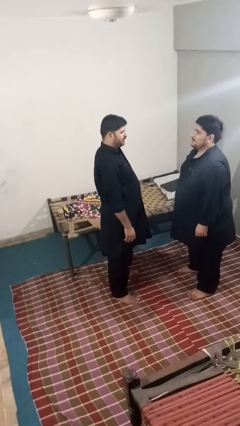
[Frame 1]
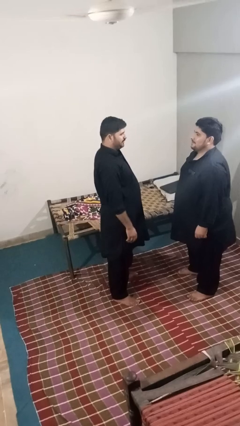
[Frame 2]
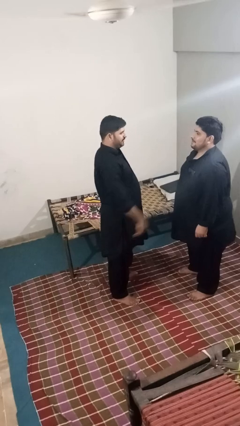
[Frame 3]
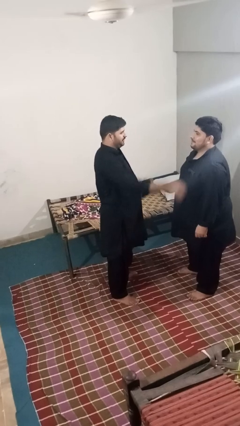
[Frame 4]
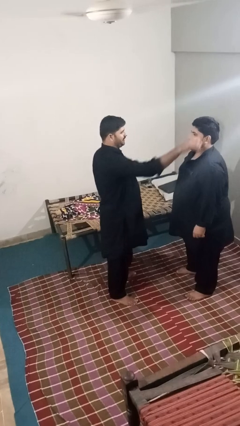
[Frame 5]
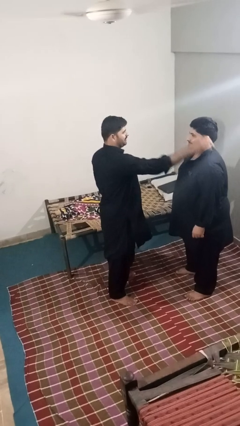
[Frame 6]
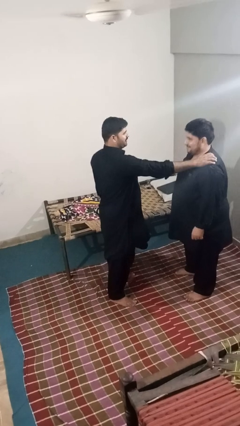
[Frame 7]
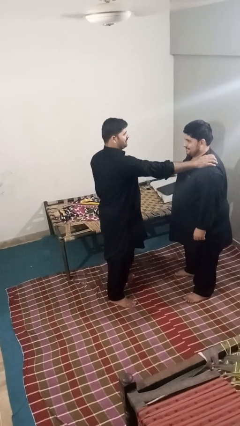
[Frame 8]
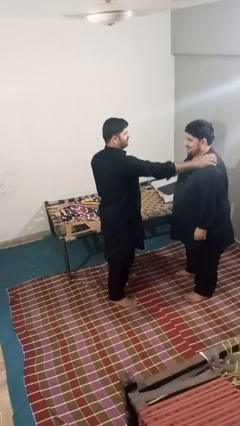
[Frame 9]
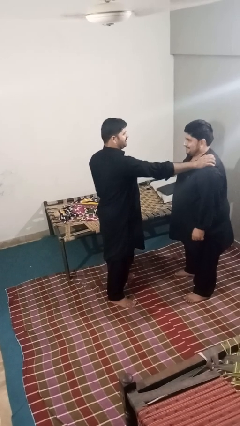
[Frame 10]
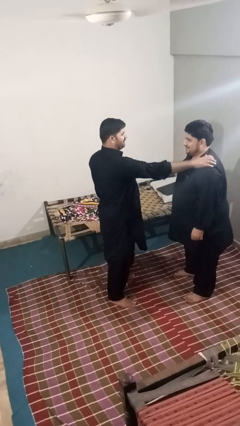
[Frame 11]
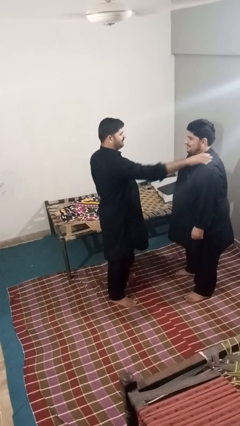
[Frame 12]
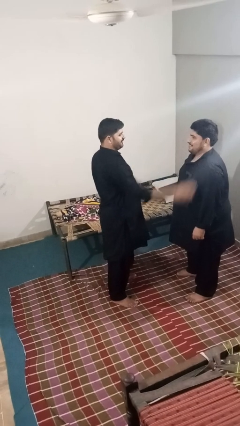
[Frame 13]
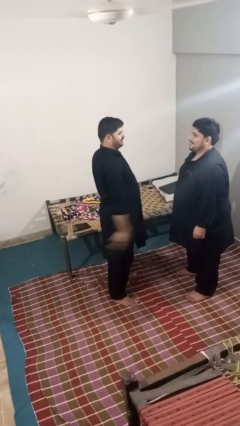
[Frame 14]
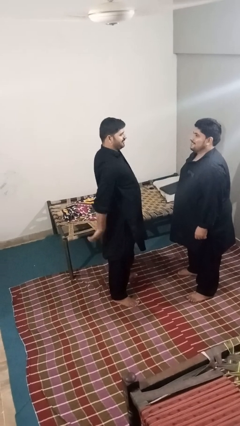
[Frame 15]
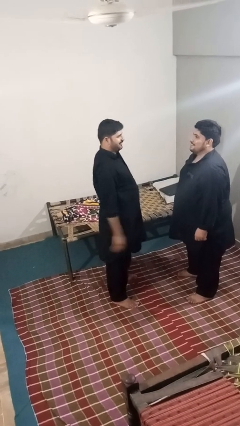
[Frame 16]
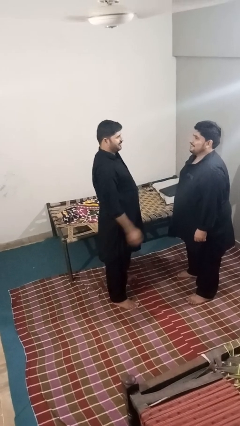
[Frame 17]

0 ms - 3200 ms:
person pounds shoulders of person

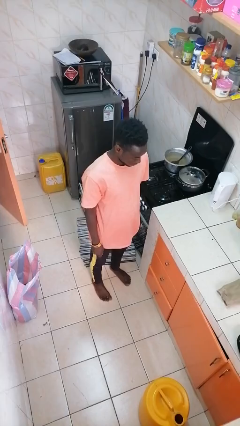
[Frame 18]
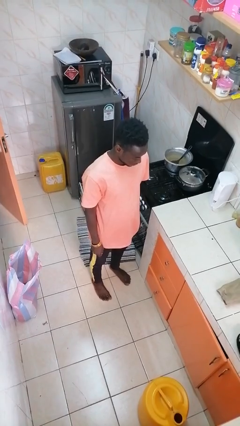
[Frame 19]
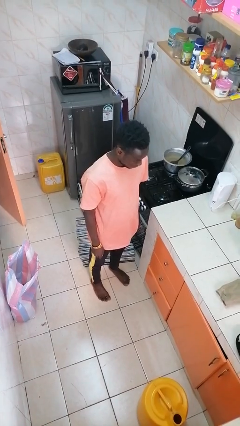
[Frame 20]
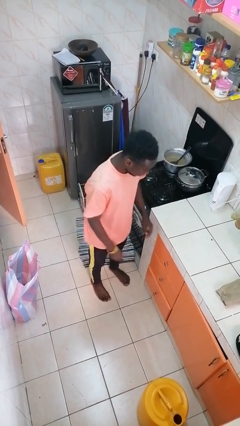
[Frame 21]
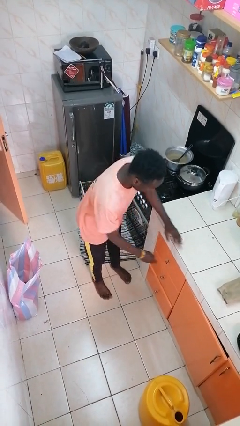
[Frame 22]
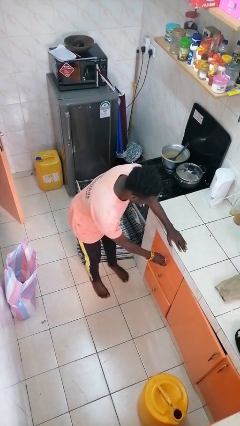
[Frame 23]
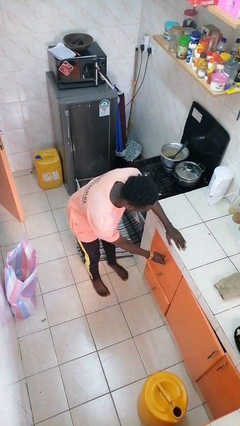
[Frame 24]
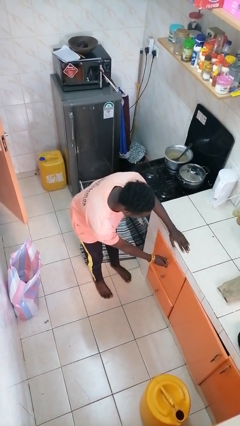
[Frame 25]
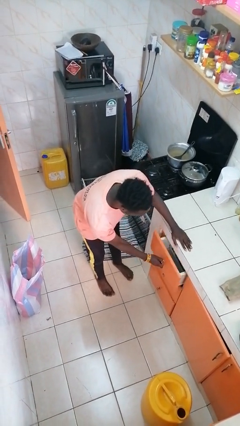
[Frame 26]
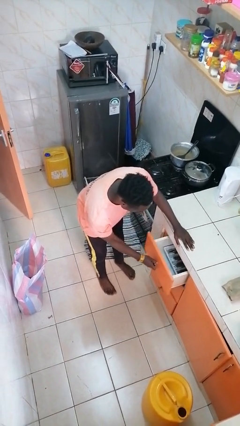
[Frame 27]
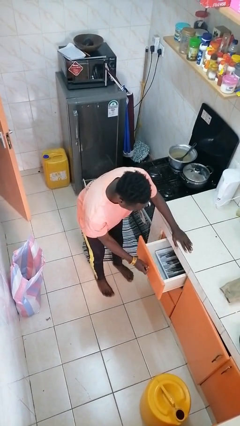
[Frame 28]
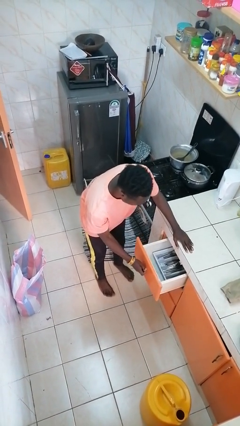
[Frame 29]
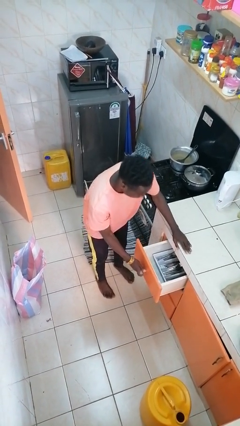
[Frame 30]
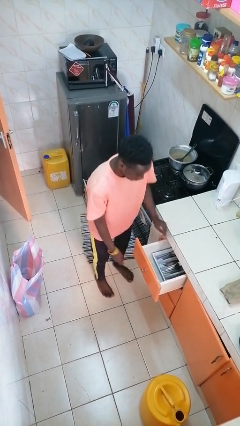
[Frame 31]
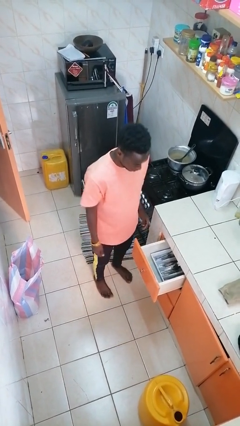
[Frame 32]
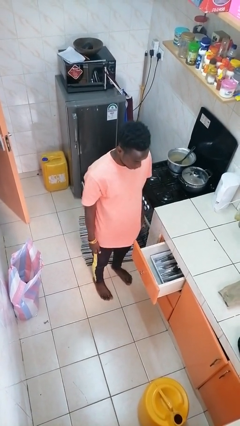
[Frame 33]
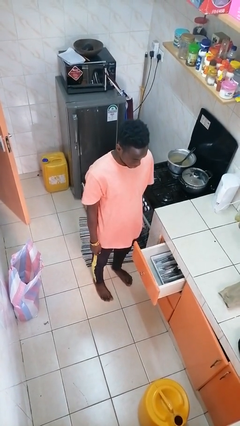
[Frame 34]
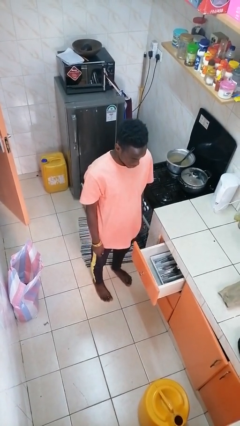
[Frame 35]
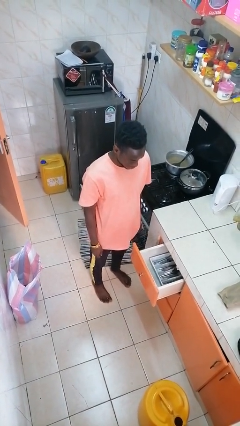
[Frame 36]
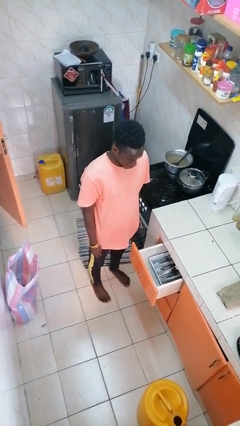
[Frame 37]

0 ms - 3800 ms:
person opens kitchen drawer

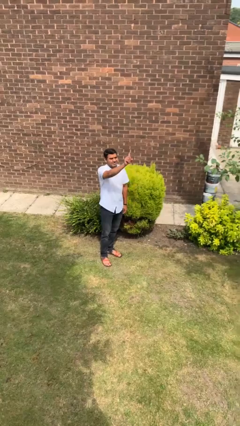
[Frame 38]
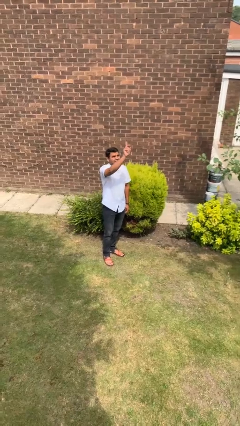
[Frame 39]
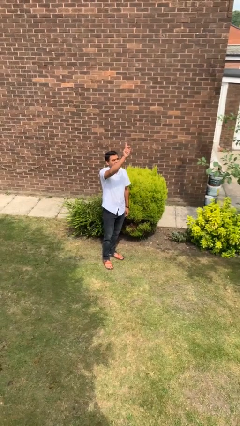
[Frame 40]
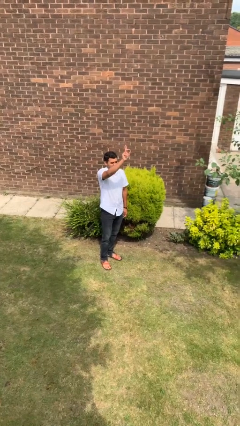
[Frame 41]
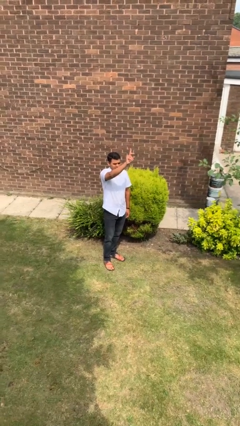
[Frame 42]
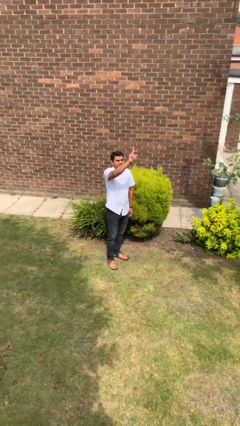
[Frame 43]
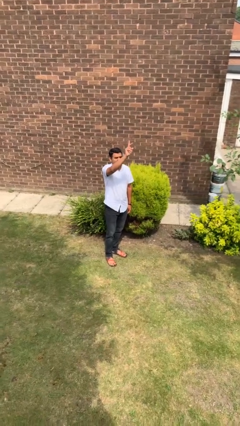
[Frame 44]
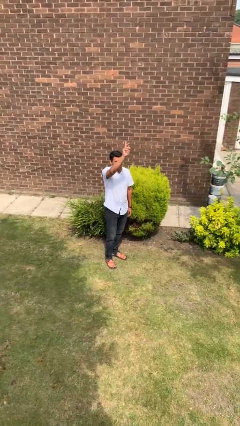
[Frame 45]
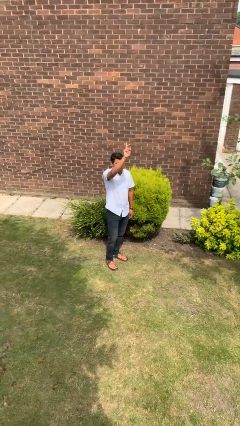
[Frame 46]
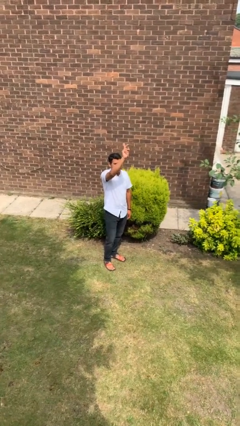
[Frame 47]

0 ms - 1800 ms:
person gestures swipe up

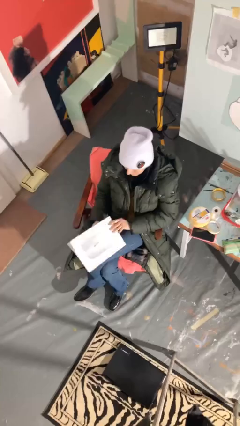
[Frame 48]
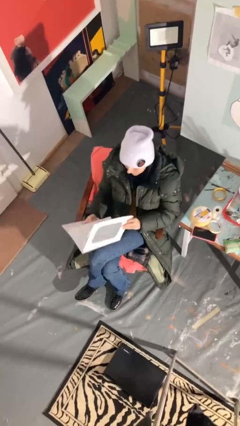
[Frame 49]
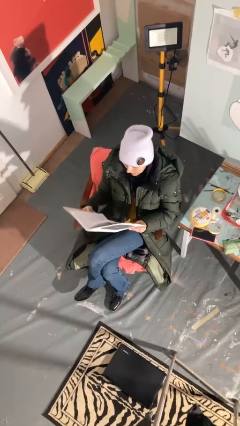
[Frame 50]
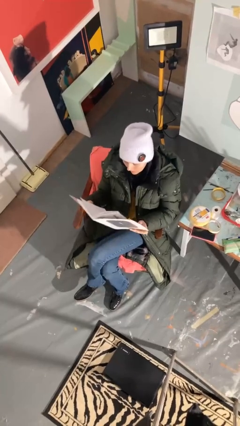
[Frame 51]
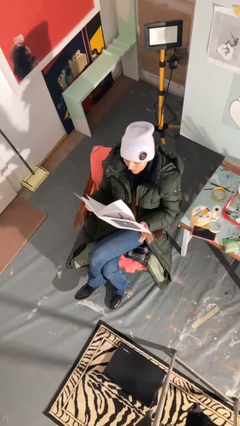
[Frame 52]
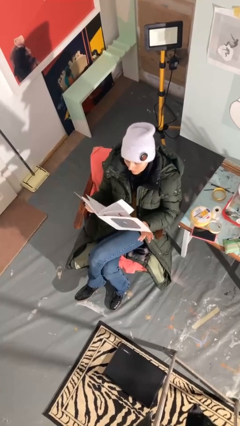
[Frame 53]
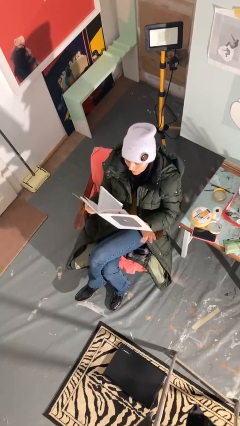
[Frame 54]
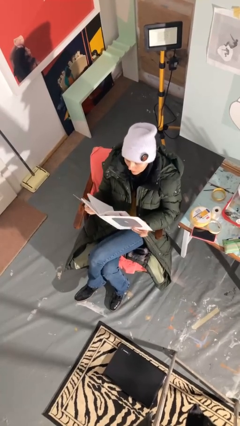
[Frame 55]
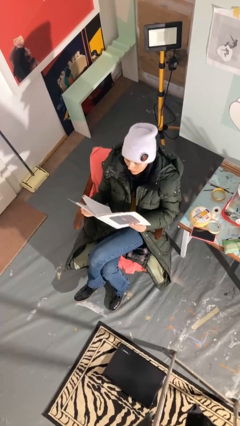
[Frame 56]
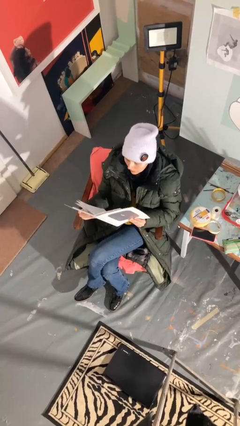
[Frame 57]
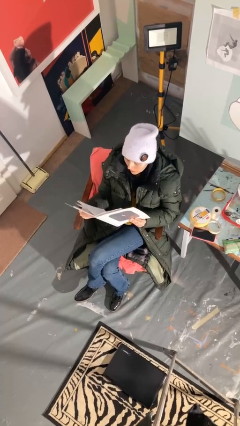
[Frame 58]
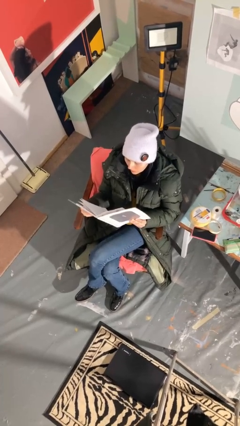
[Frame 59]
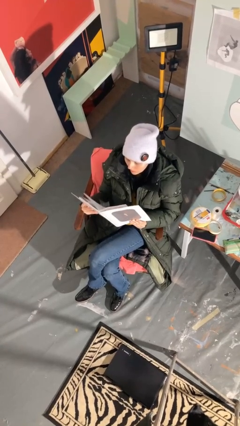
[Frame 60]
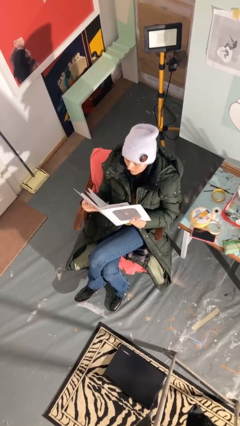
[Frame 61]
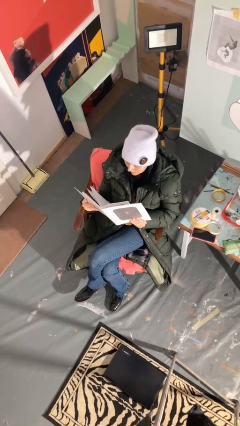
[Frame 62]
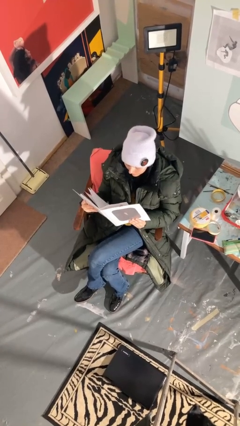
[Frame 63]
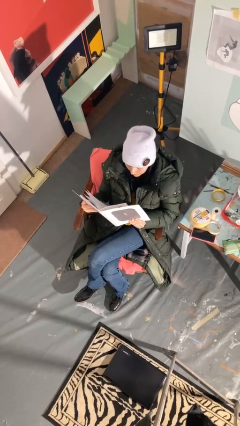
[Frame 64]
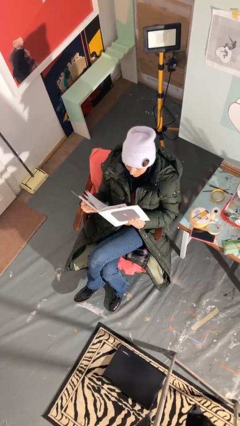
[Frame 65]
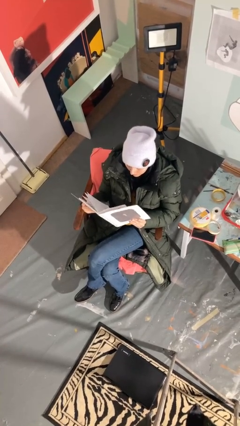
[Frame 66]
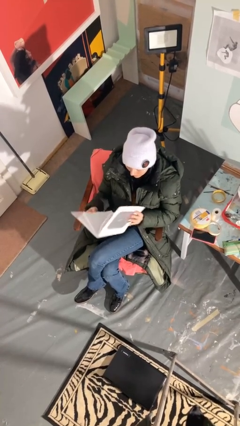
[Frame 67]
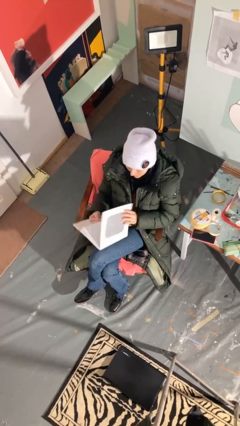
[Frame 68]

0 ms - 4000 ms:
person reads document

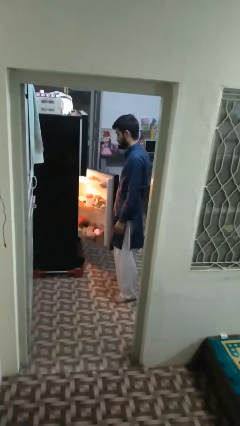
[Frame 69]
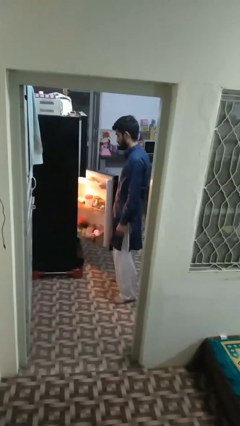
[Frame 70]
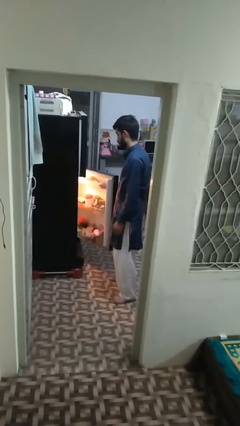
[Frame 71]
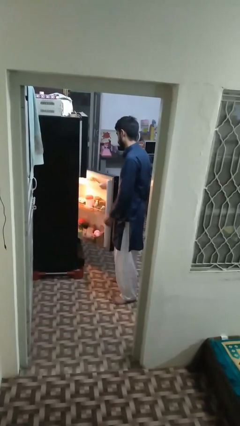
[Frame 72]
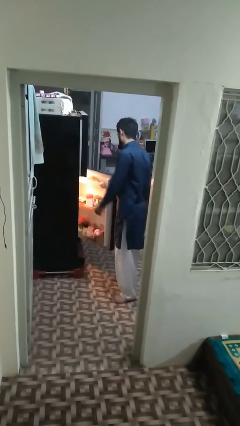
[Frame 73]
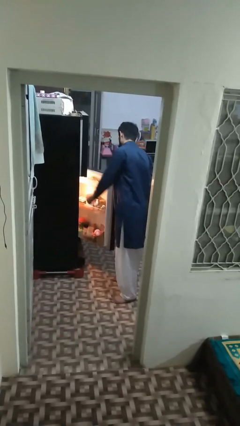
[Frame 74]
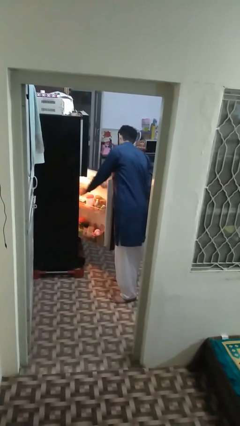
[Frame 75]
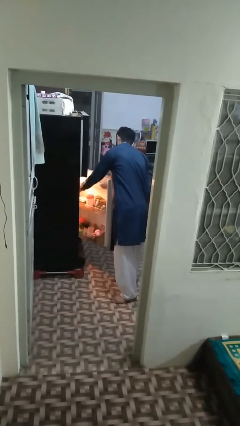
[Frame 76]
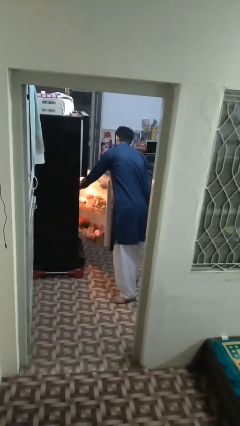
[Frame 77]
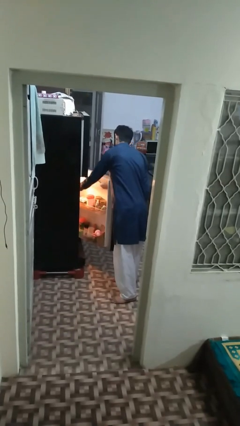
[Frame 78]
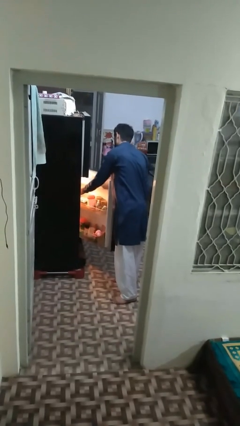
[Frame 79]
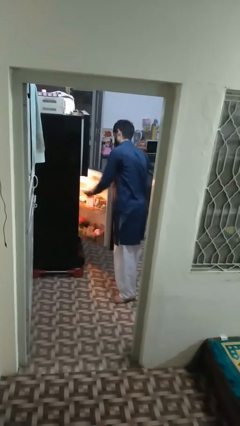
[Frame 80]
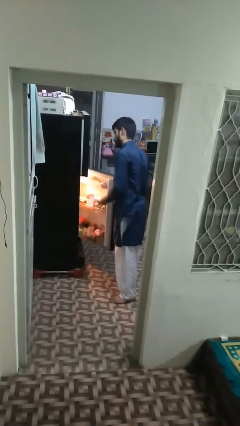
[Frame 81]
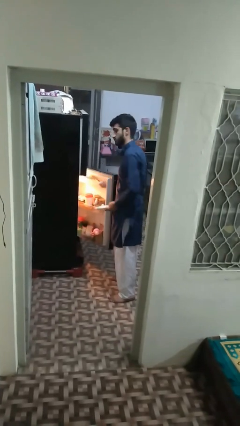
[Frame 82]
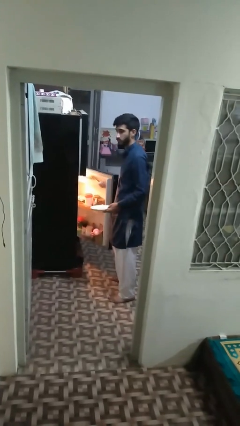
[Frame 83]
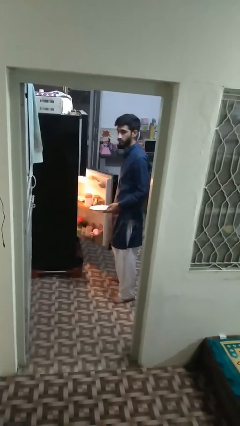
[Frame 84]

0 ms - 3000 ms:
person takes object from refrigerator

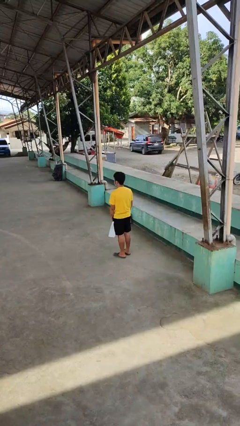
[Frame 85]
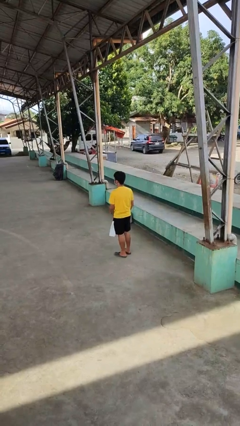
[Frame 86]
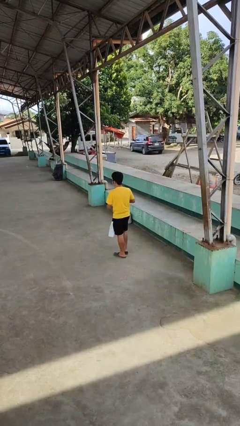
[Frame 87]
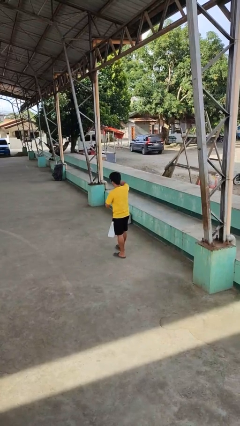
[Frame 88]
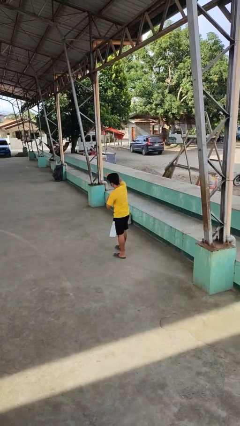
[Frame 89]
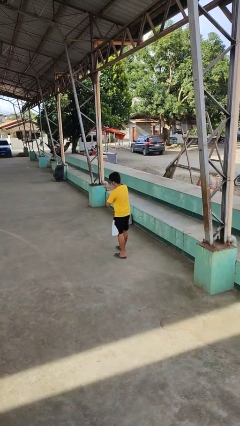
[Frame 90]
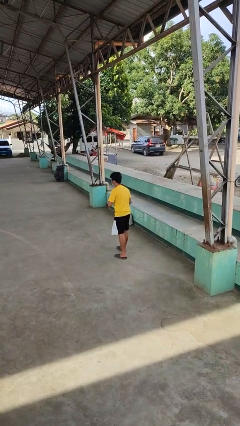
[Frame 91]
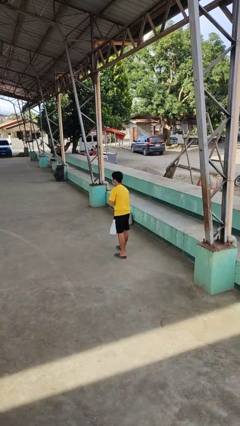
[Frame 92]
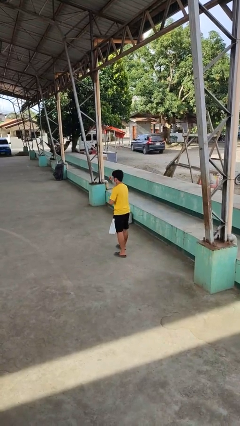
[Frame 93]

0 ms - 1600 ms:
person punches
